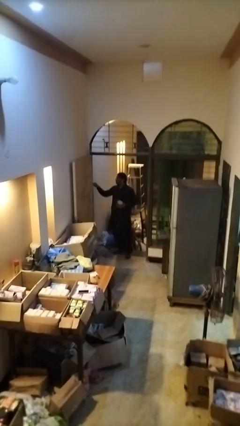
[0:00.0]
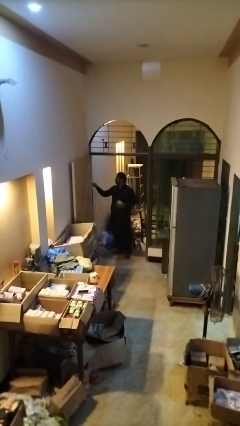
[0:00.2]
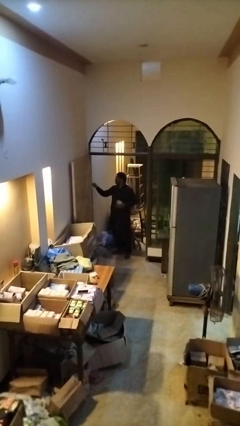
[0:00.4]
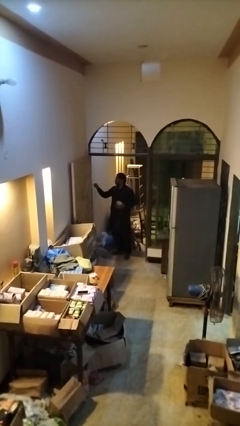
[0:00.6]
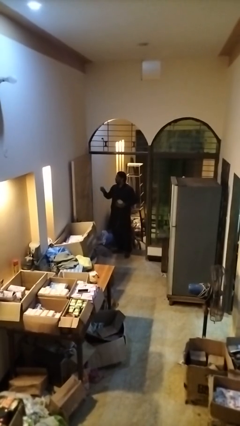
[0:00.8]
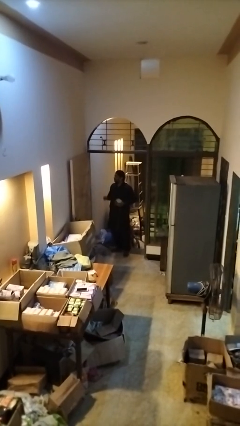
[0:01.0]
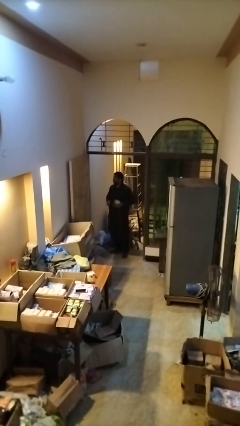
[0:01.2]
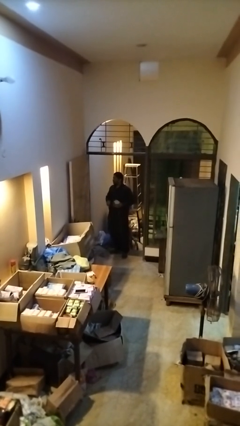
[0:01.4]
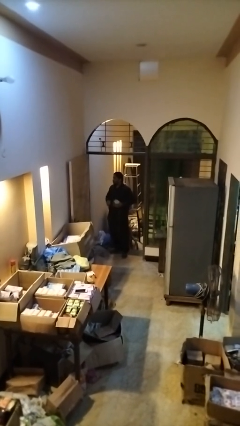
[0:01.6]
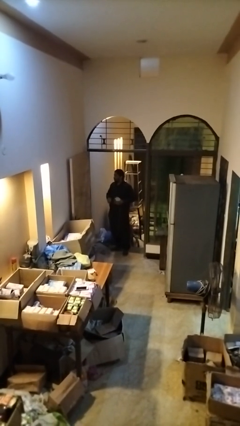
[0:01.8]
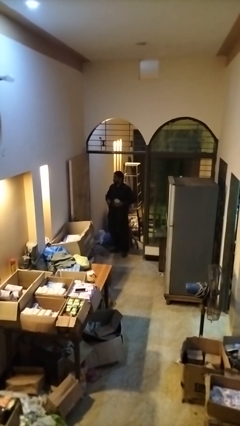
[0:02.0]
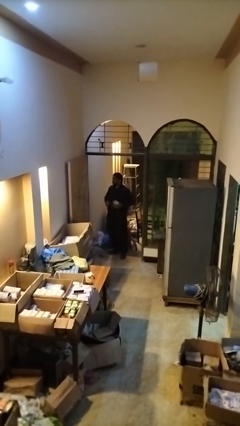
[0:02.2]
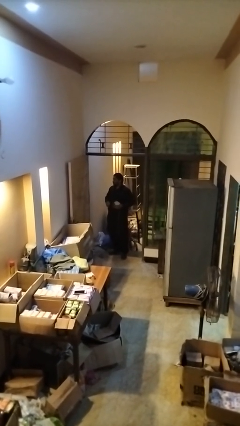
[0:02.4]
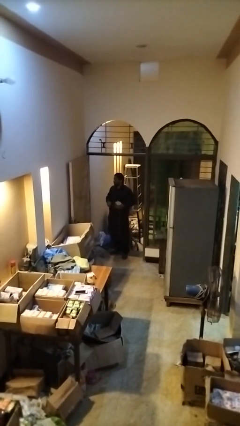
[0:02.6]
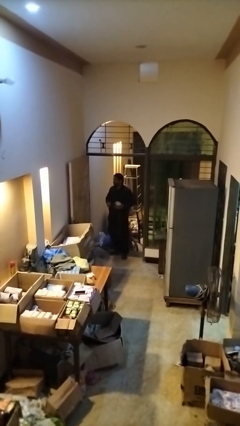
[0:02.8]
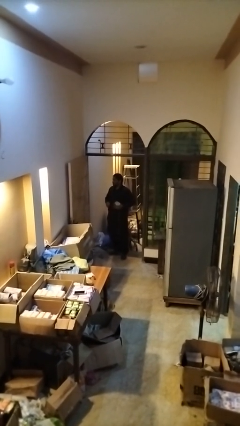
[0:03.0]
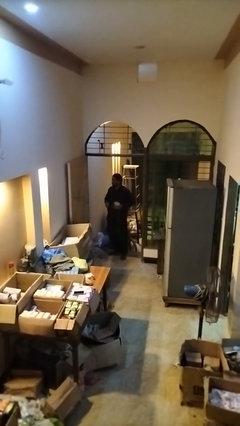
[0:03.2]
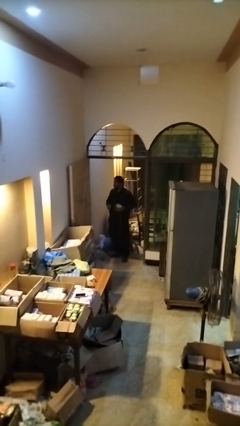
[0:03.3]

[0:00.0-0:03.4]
person unplugs from electrical socket

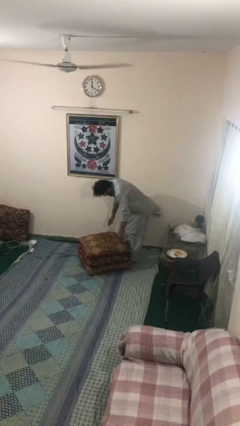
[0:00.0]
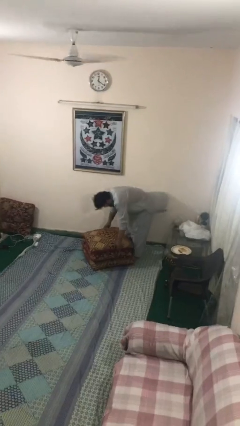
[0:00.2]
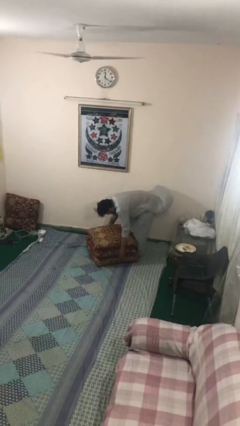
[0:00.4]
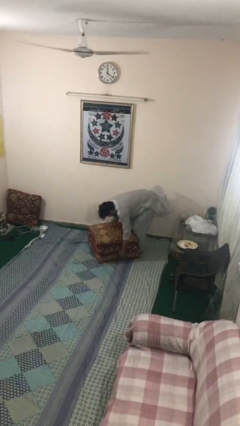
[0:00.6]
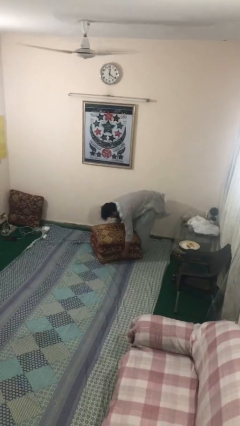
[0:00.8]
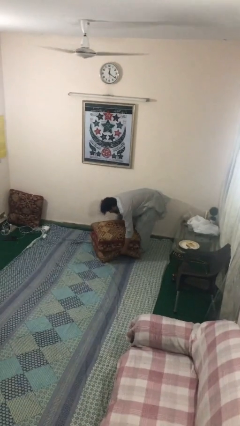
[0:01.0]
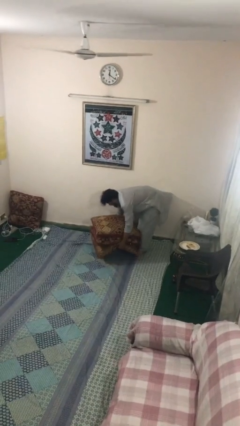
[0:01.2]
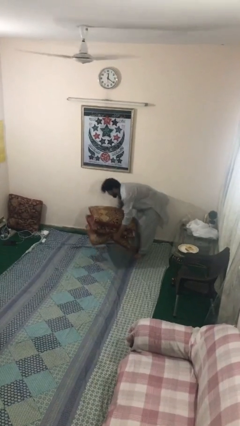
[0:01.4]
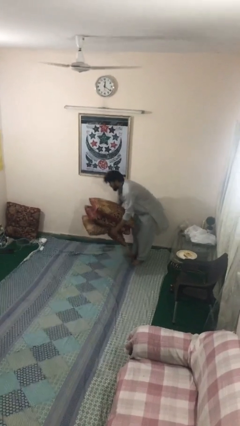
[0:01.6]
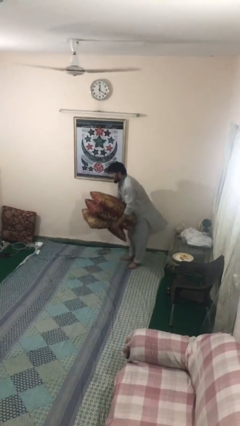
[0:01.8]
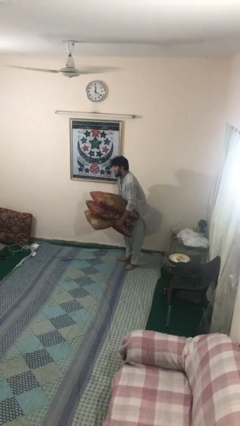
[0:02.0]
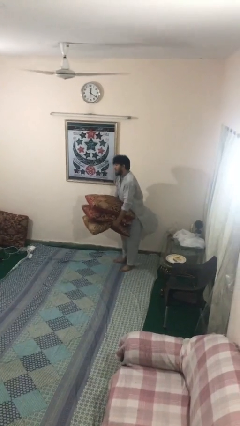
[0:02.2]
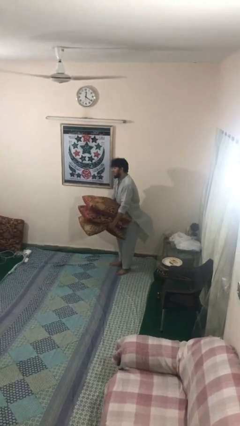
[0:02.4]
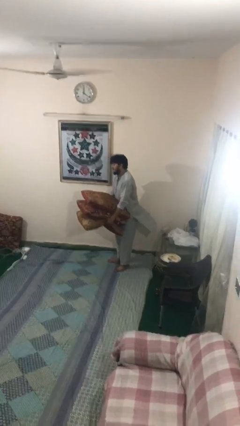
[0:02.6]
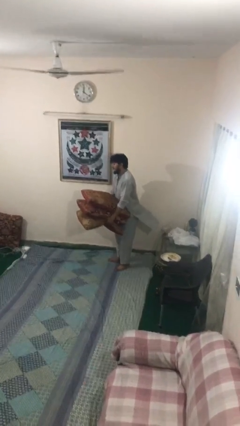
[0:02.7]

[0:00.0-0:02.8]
person picks up object from floor

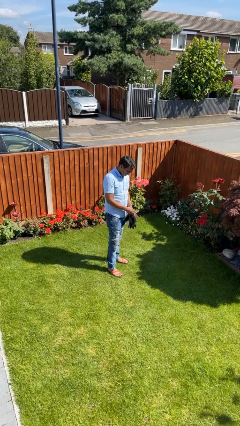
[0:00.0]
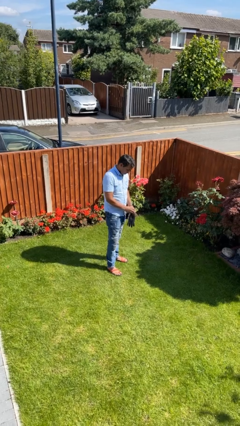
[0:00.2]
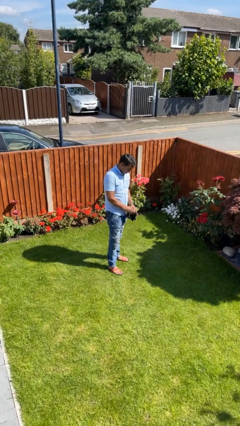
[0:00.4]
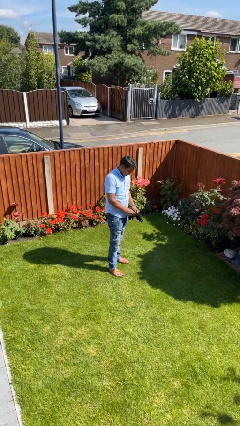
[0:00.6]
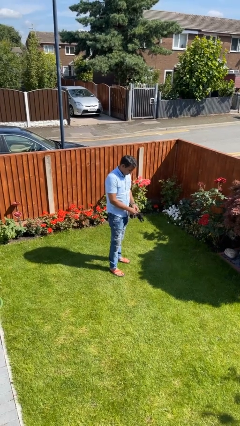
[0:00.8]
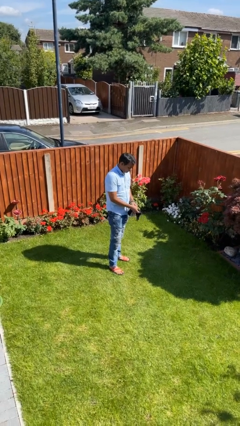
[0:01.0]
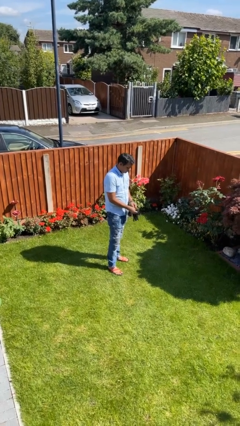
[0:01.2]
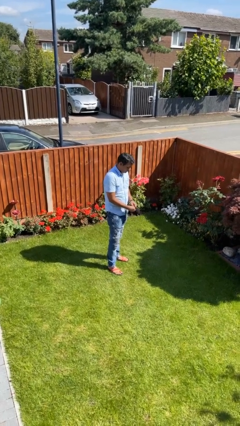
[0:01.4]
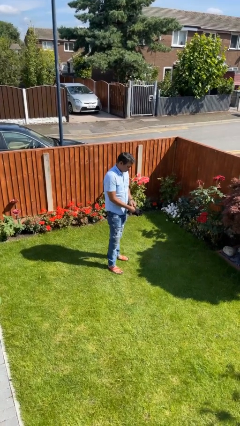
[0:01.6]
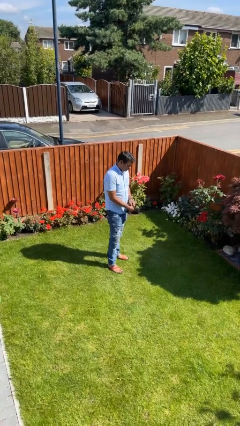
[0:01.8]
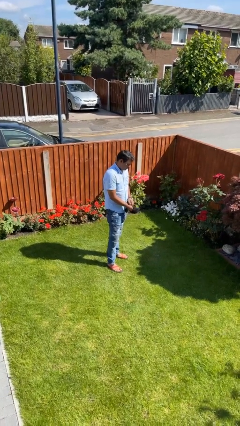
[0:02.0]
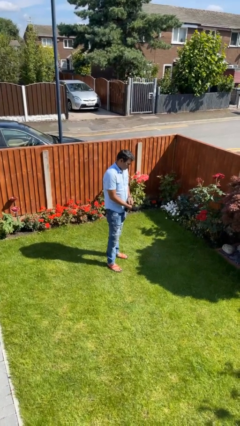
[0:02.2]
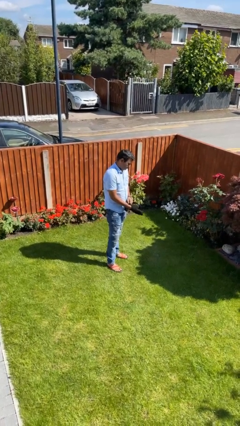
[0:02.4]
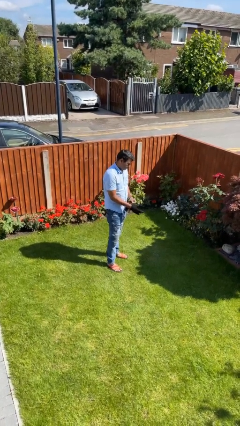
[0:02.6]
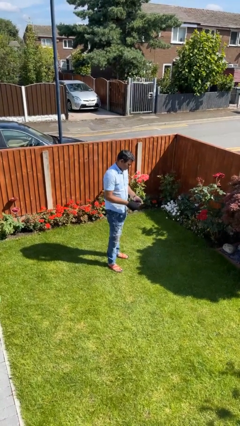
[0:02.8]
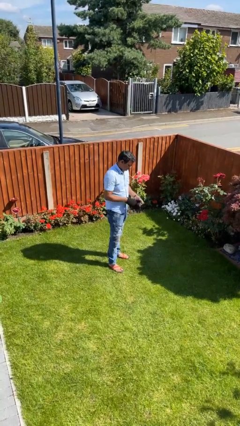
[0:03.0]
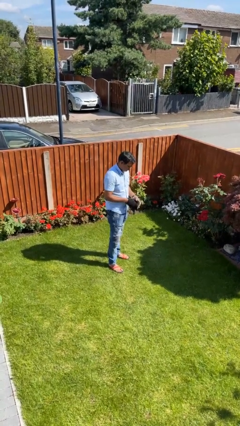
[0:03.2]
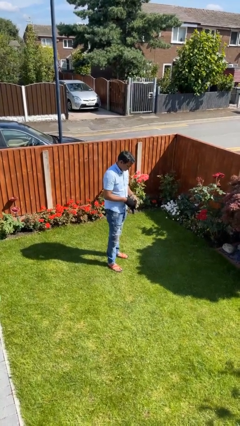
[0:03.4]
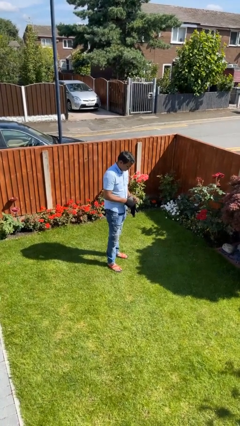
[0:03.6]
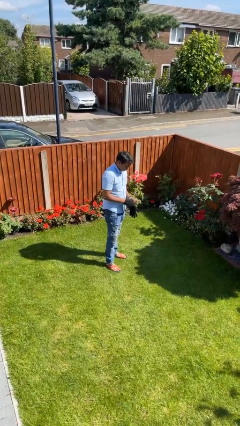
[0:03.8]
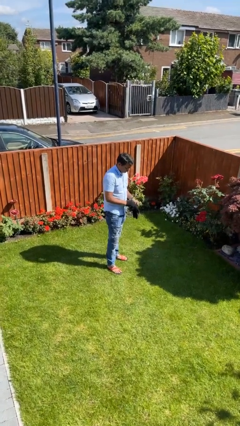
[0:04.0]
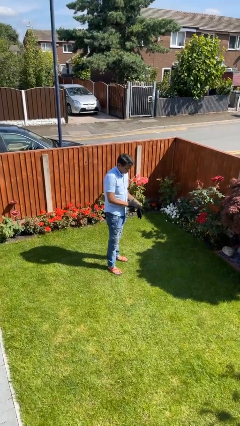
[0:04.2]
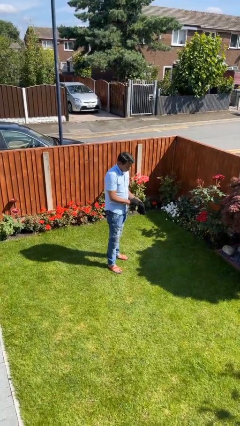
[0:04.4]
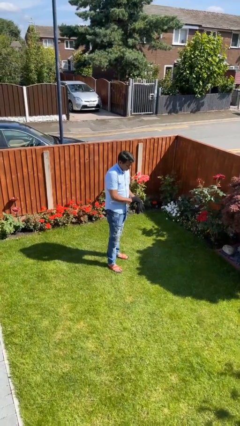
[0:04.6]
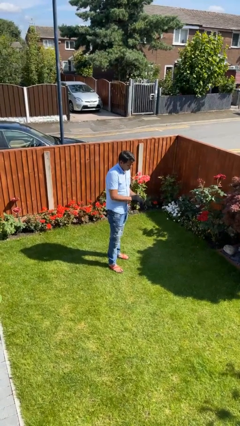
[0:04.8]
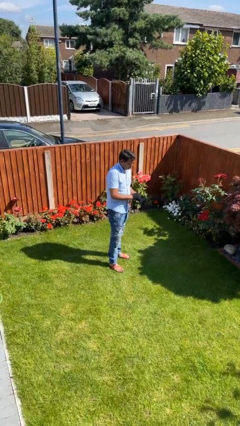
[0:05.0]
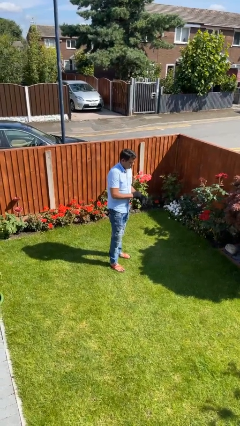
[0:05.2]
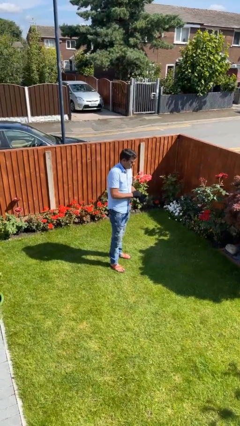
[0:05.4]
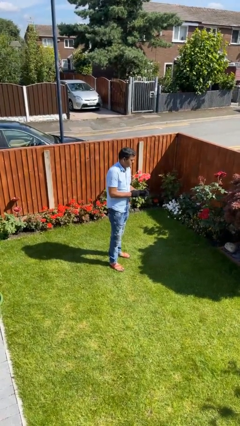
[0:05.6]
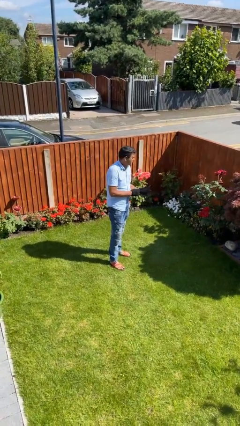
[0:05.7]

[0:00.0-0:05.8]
person puts on gloves

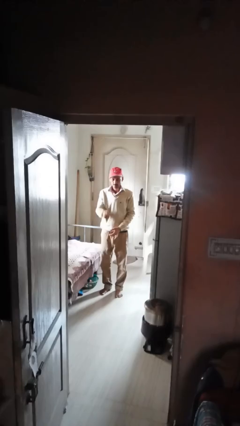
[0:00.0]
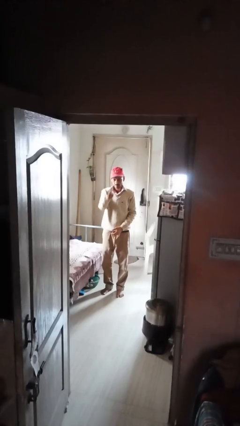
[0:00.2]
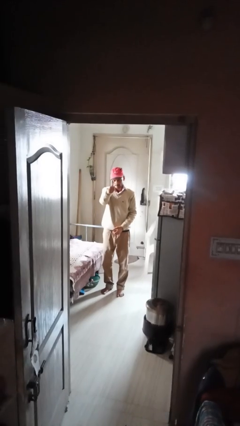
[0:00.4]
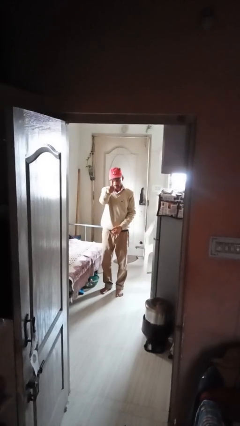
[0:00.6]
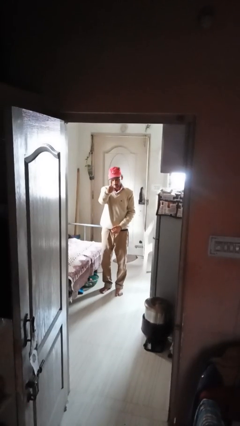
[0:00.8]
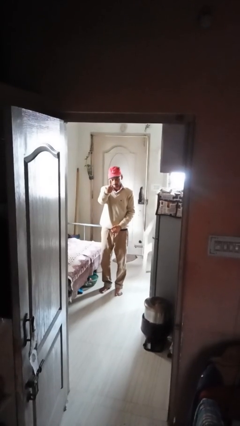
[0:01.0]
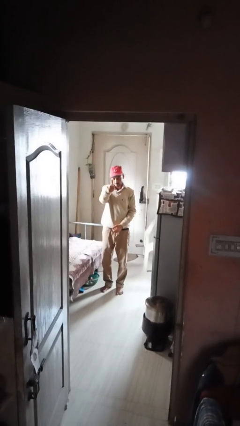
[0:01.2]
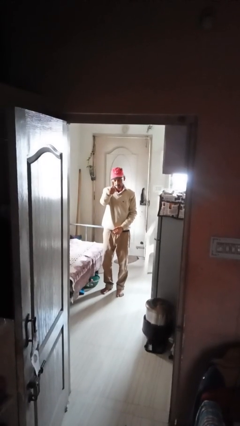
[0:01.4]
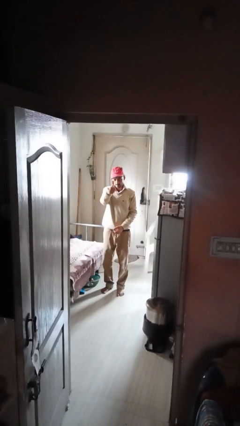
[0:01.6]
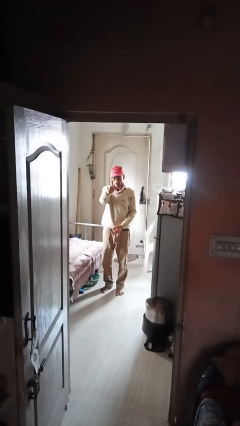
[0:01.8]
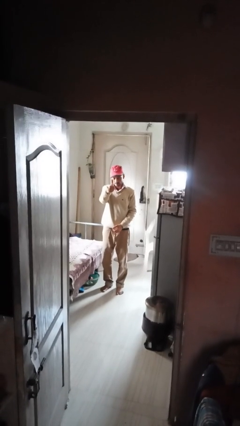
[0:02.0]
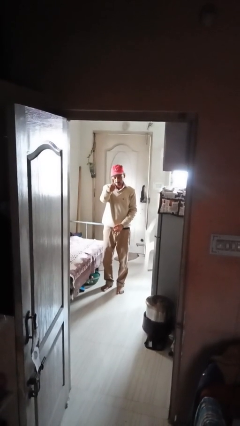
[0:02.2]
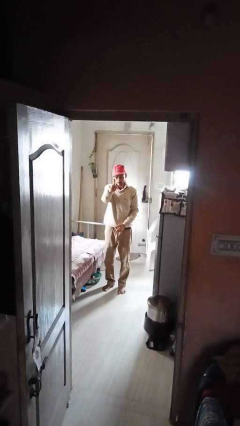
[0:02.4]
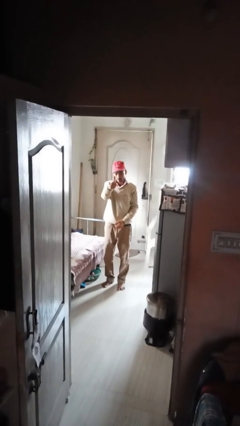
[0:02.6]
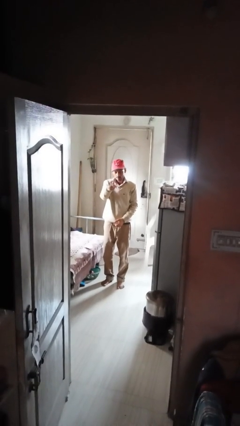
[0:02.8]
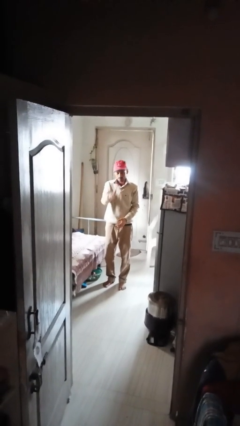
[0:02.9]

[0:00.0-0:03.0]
person gestures thumbs up

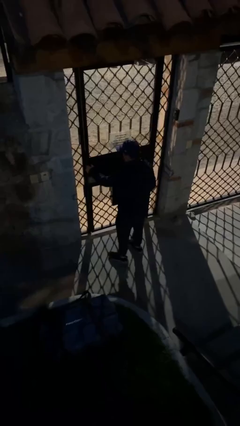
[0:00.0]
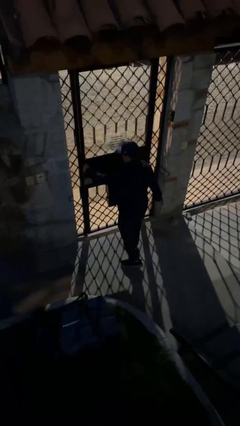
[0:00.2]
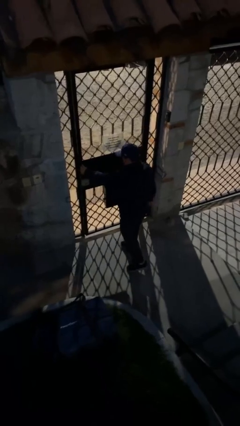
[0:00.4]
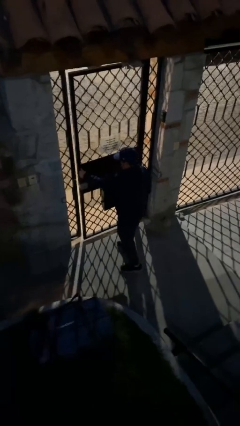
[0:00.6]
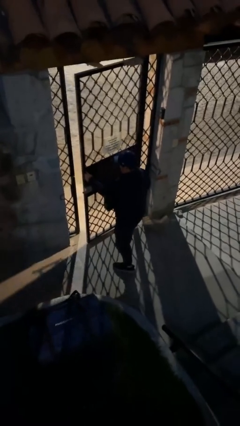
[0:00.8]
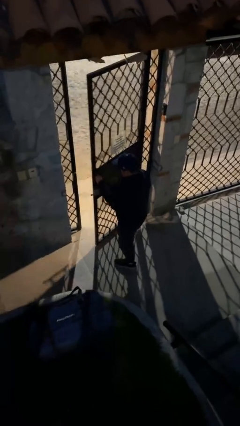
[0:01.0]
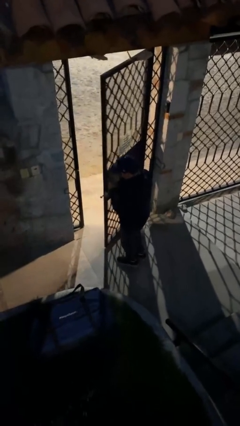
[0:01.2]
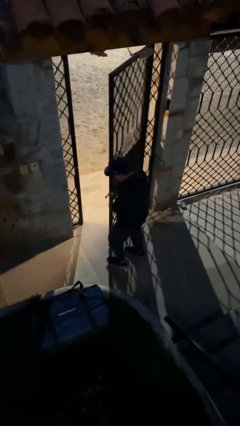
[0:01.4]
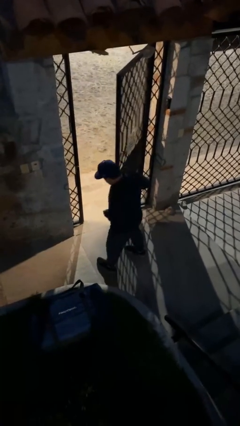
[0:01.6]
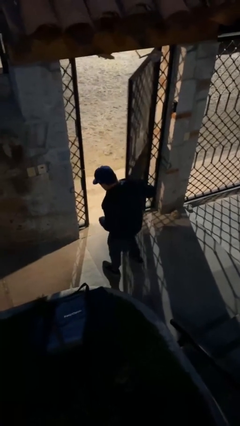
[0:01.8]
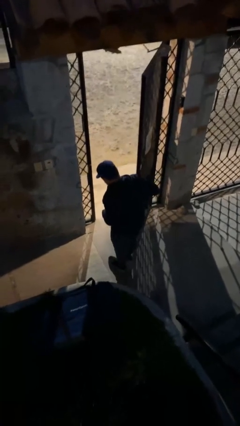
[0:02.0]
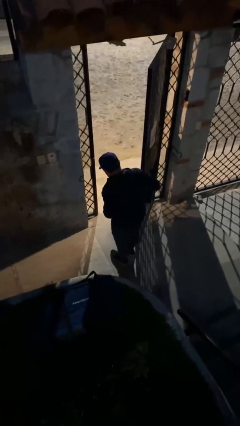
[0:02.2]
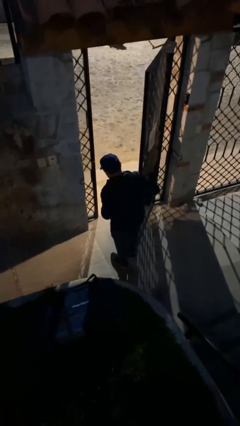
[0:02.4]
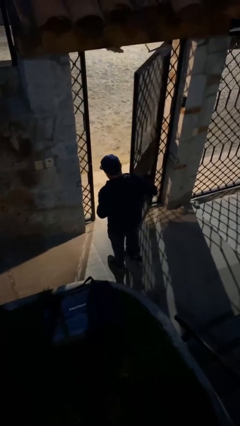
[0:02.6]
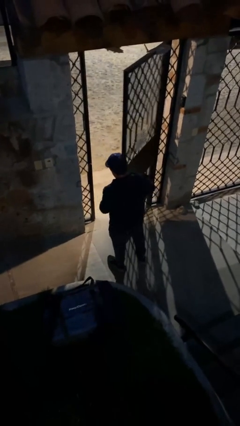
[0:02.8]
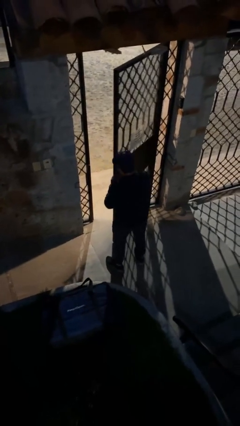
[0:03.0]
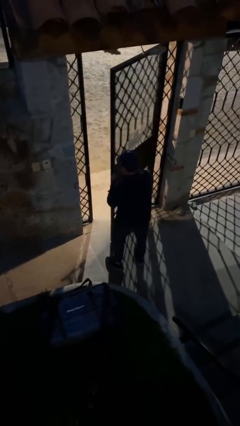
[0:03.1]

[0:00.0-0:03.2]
person opens facility door
